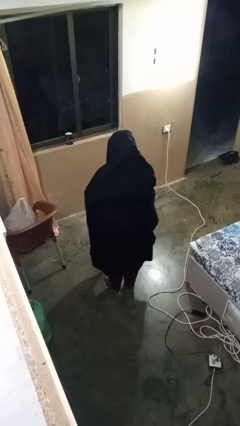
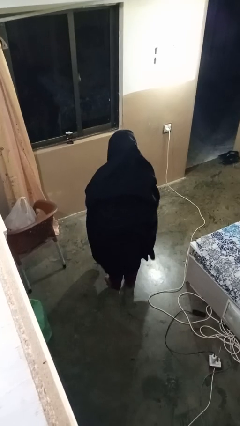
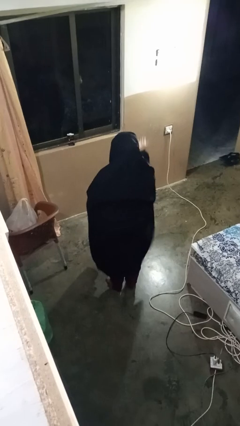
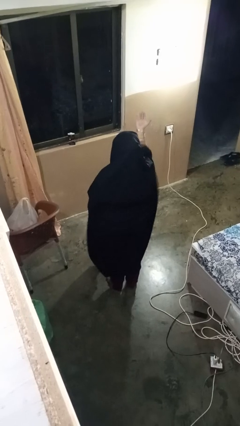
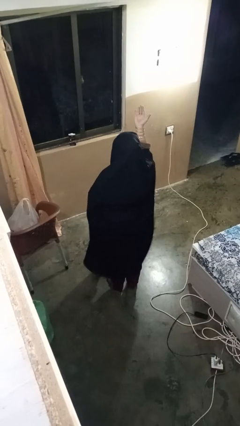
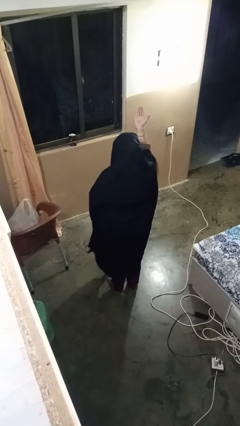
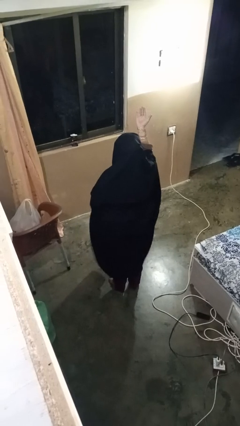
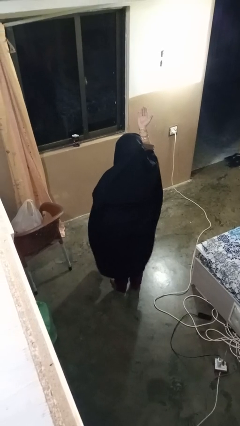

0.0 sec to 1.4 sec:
person gestures swipe up

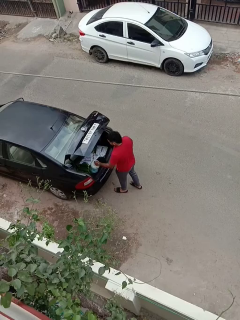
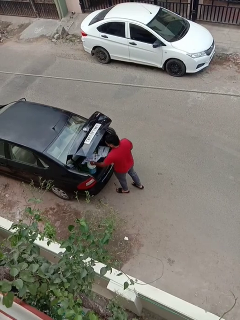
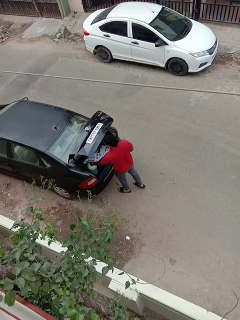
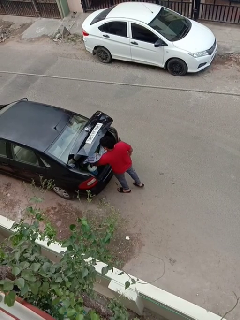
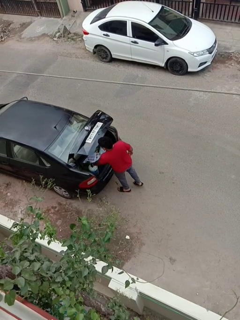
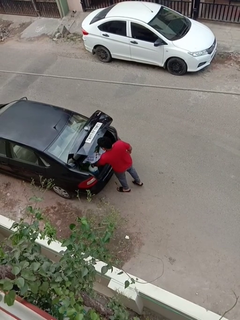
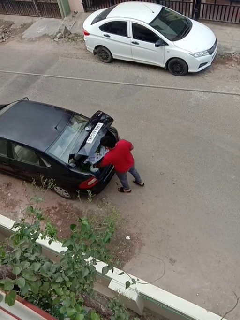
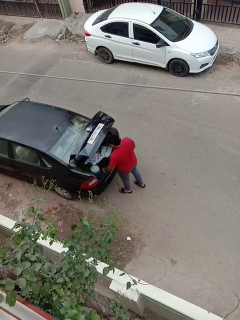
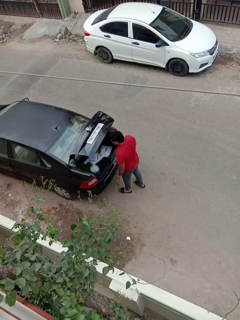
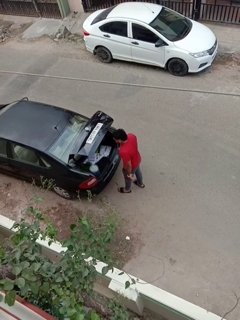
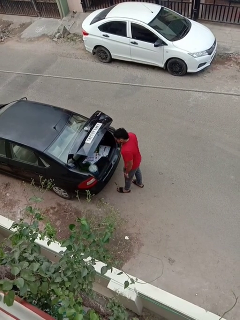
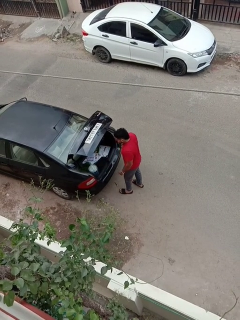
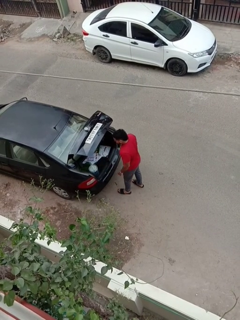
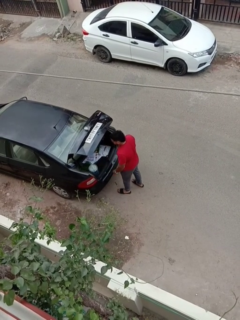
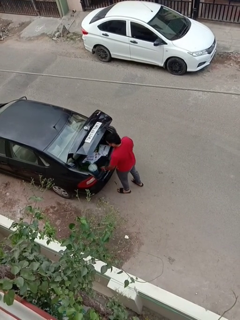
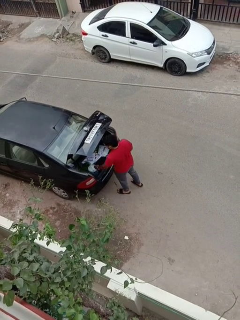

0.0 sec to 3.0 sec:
person loads car

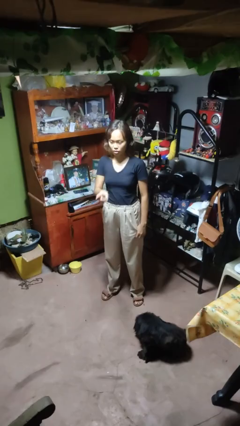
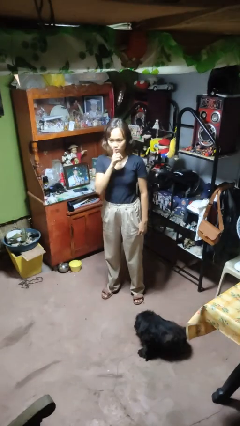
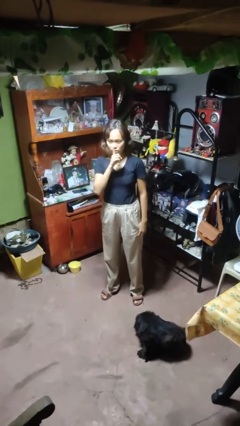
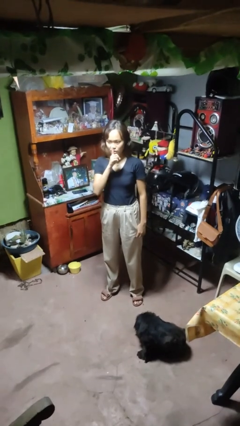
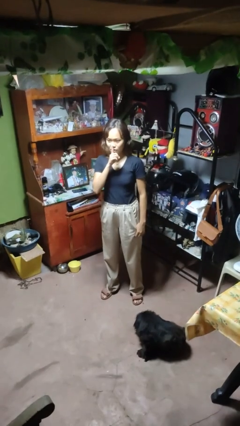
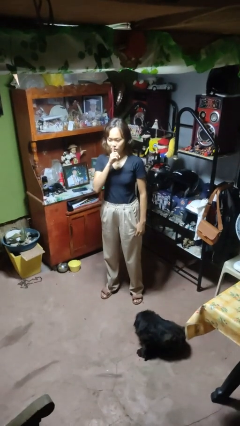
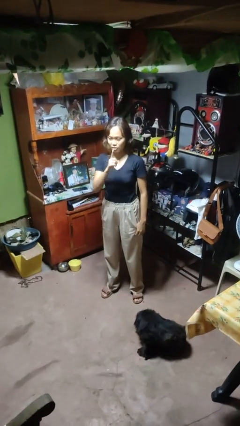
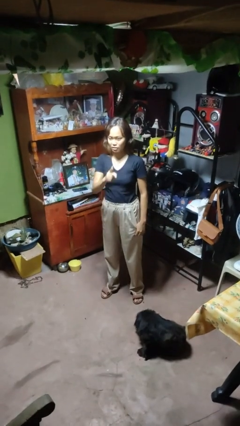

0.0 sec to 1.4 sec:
person gestures be quiet

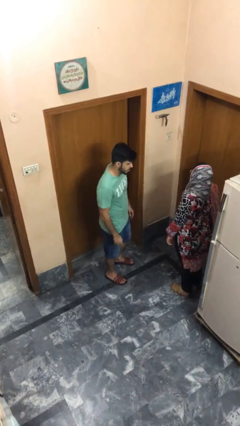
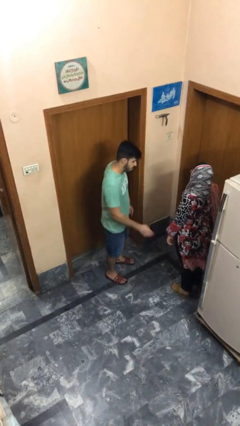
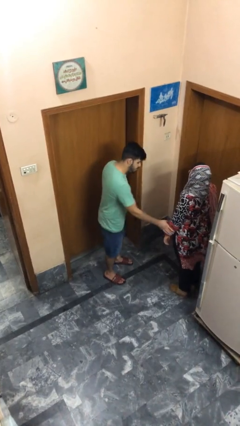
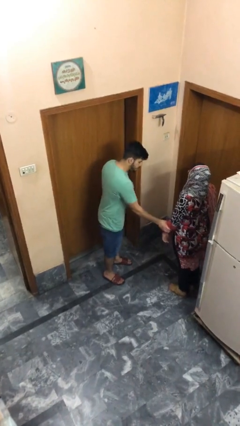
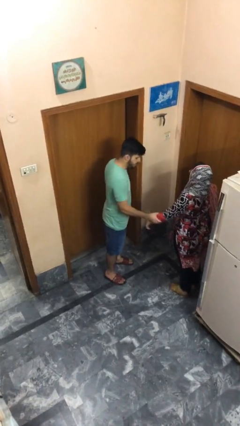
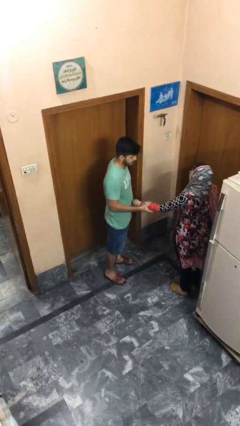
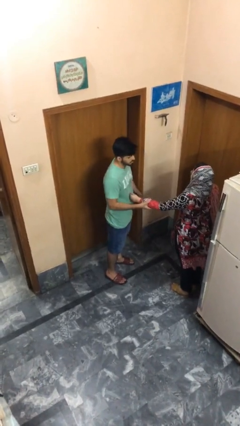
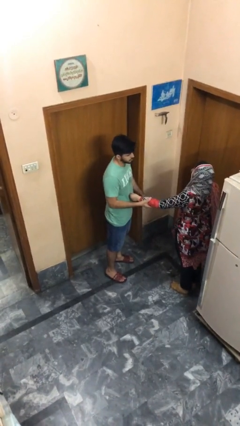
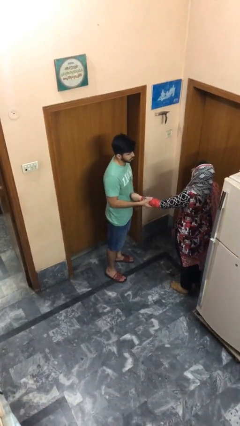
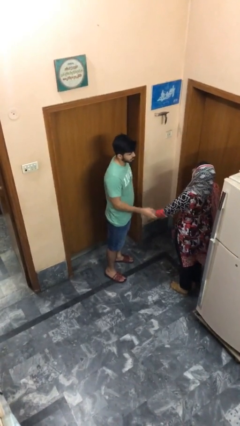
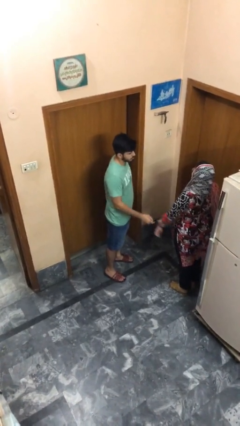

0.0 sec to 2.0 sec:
person grabs person by forearm

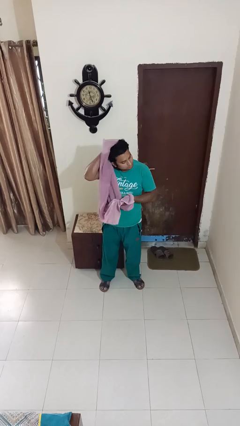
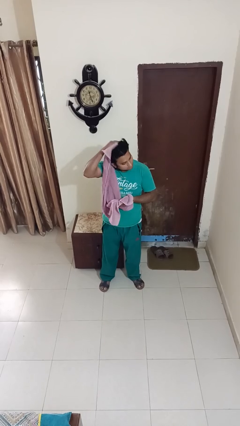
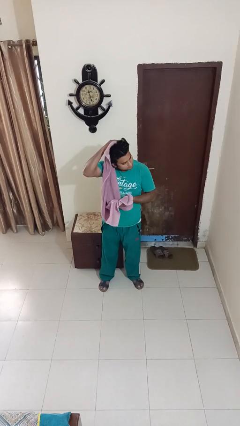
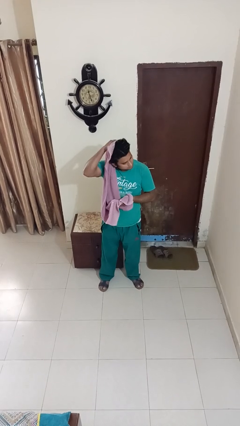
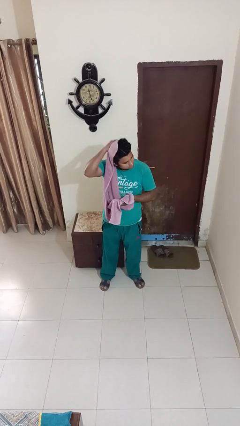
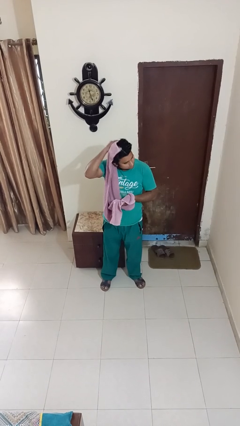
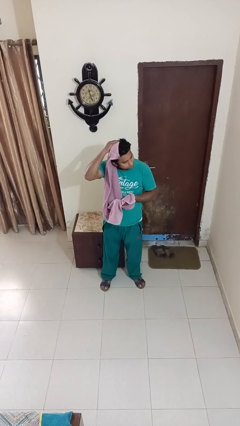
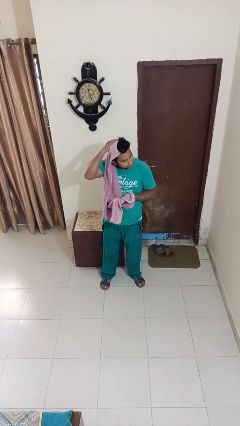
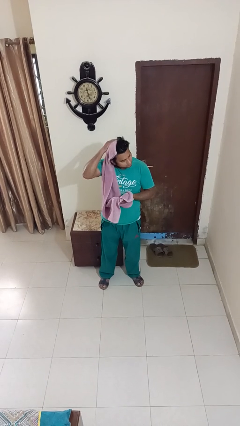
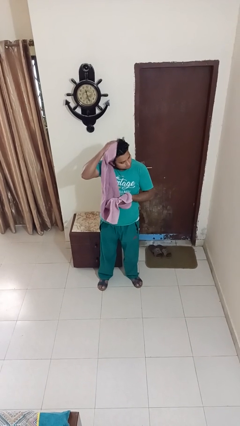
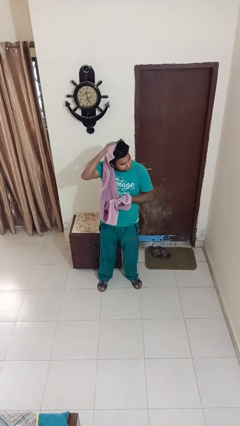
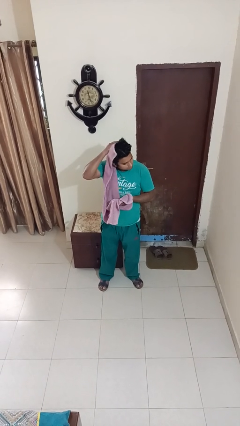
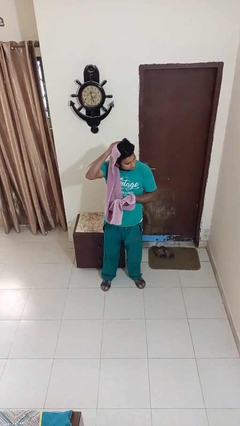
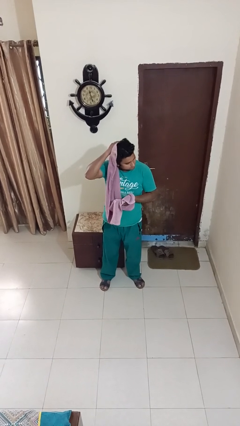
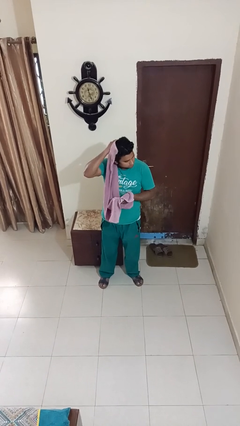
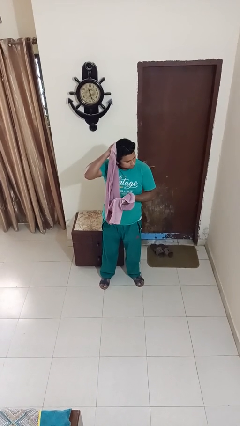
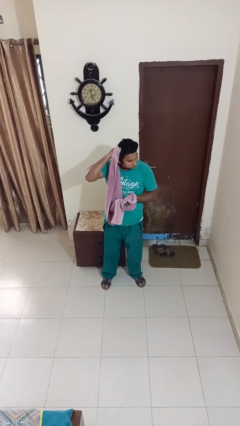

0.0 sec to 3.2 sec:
person dries hair with towel

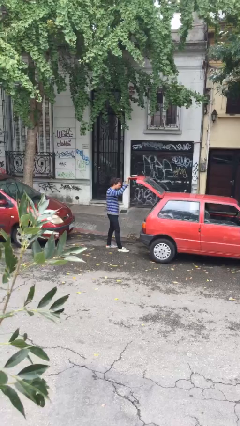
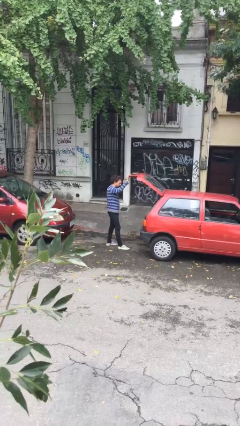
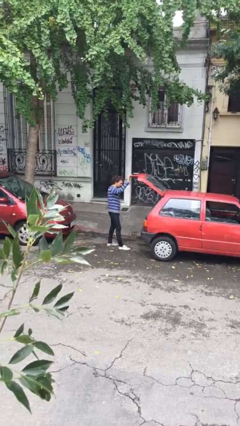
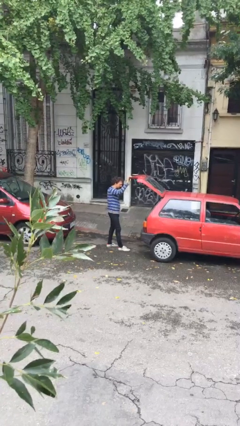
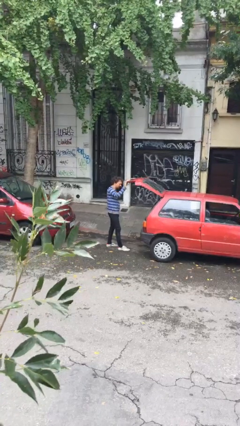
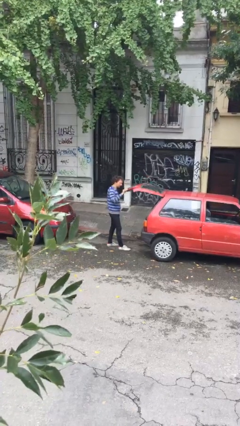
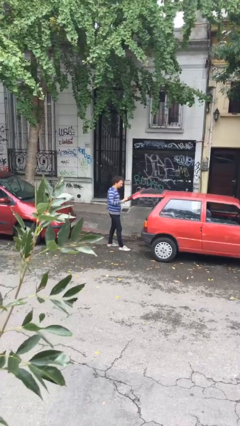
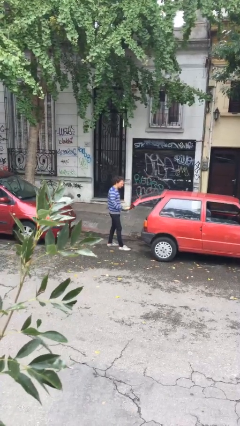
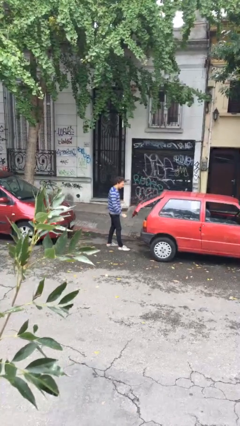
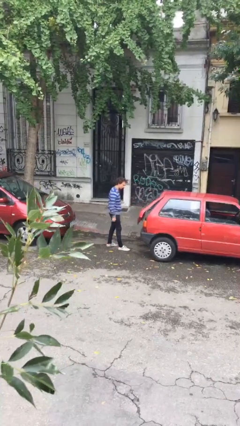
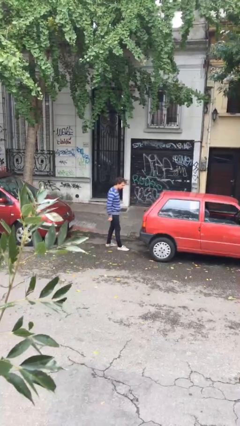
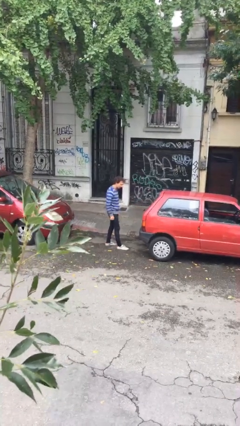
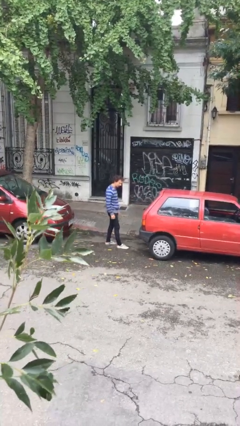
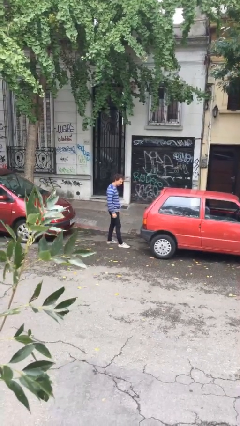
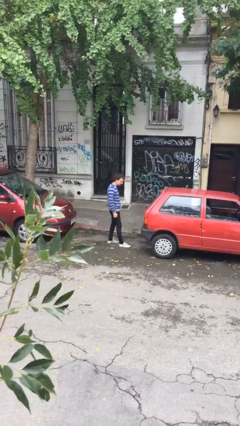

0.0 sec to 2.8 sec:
person closes car trunk

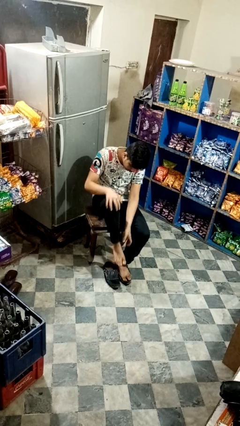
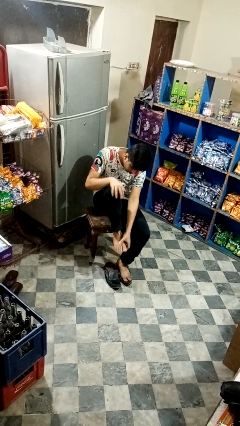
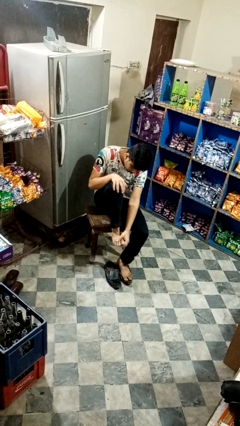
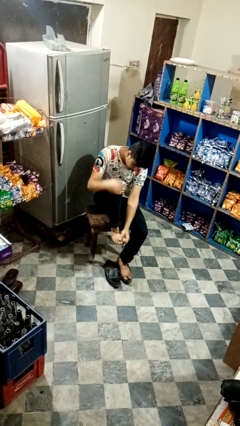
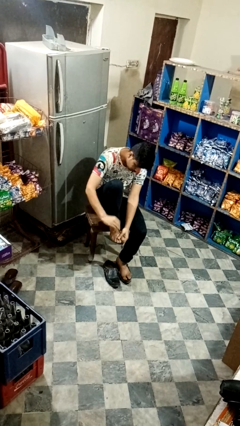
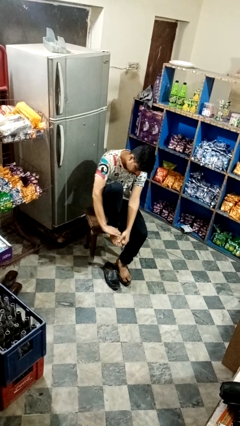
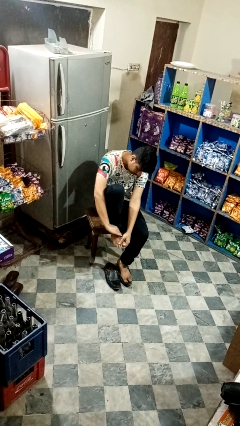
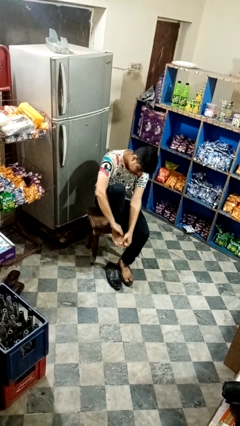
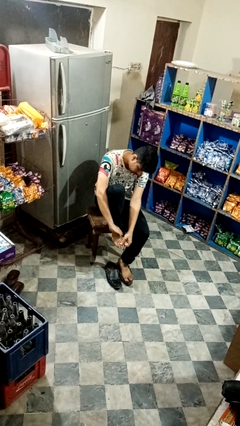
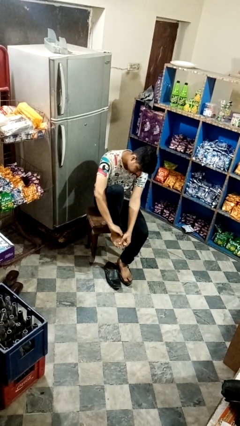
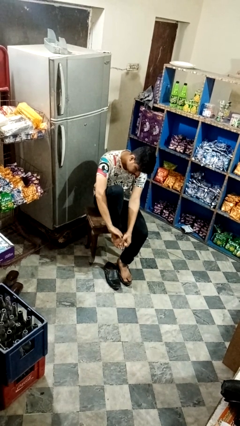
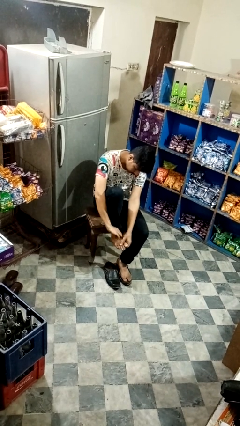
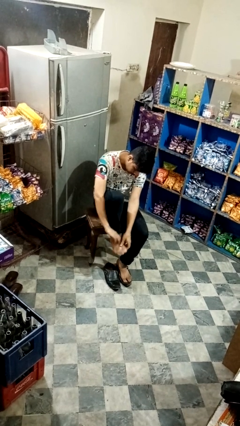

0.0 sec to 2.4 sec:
person rubs foot

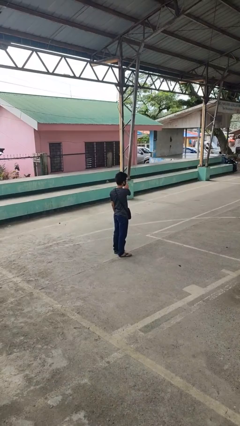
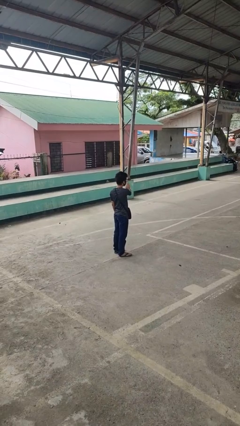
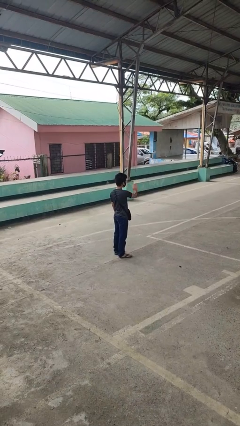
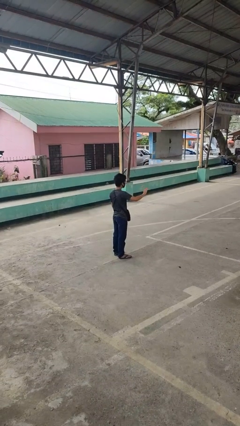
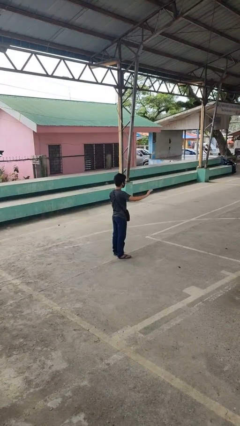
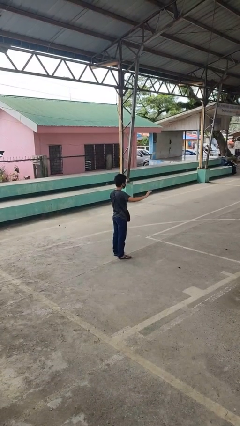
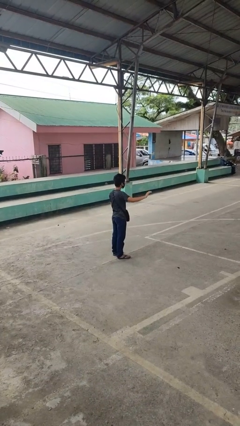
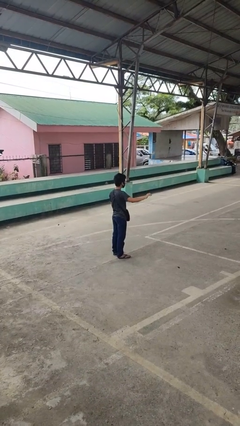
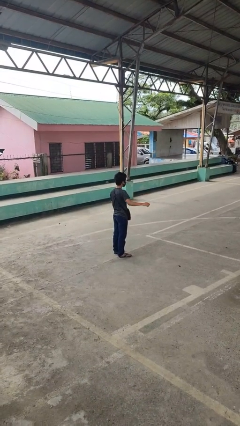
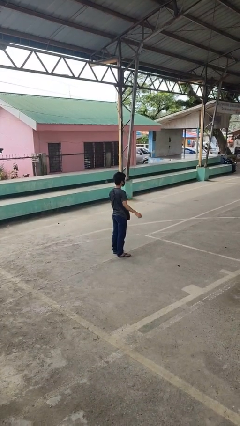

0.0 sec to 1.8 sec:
person gestures swipe right
